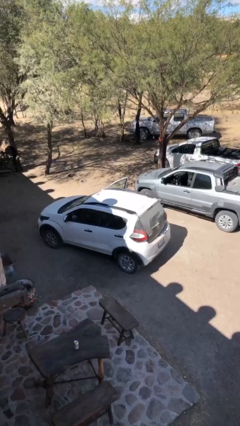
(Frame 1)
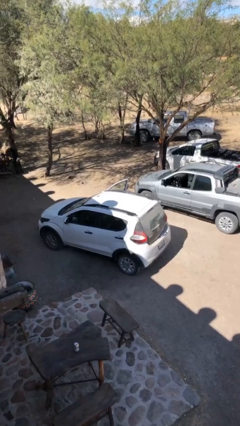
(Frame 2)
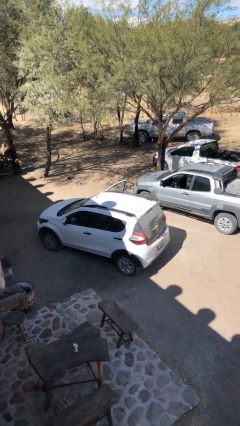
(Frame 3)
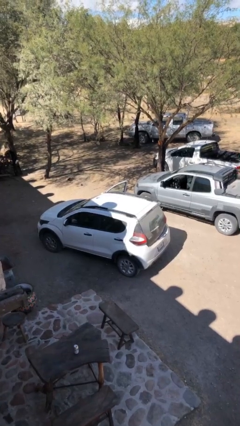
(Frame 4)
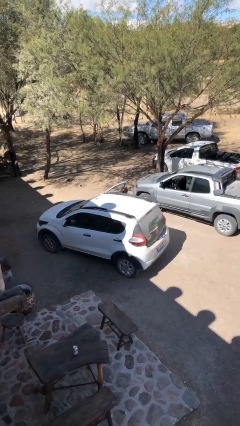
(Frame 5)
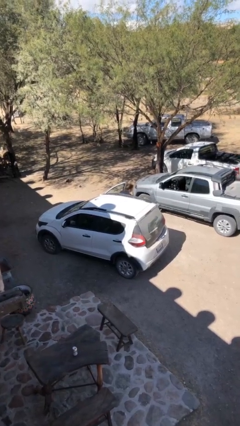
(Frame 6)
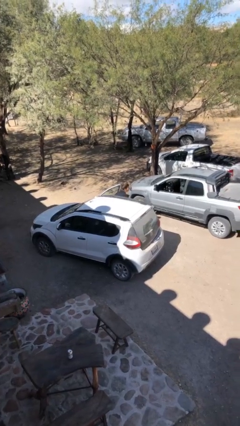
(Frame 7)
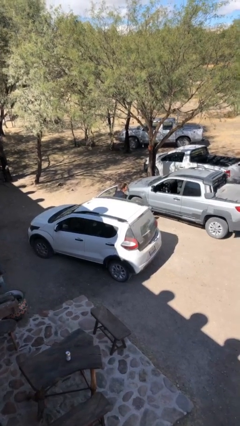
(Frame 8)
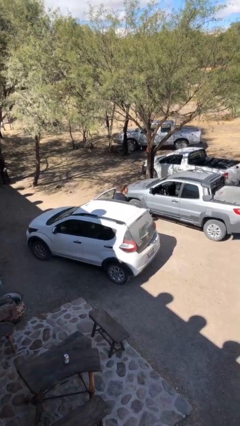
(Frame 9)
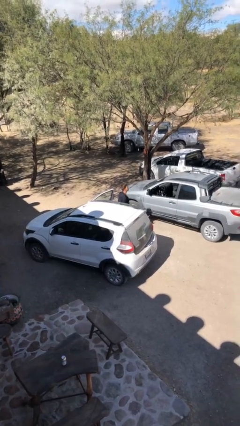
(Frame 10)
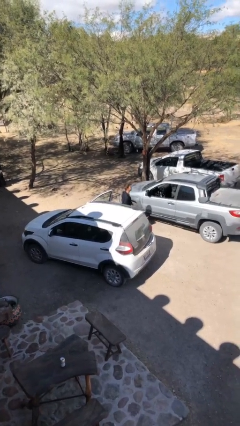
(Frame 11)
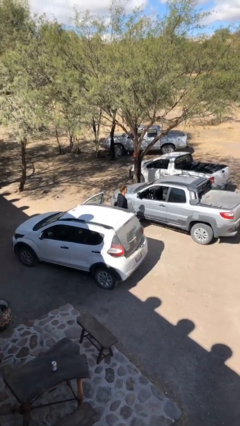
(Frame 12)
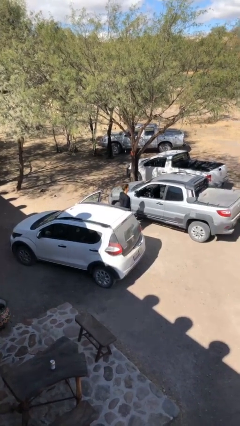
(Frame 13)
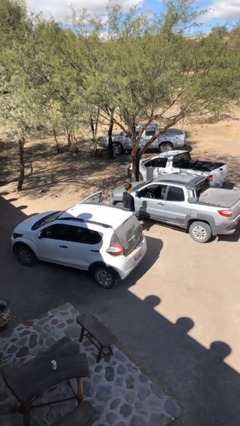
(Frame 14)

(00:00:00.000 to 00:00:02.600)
person exits car

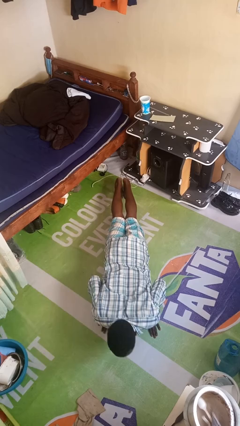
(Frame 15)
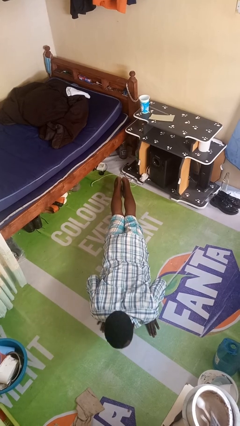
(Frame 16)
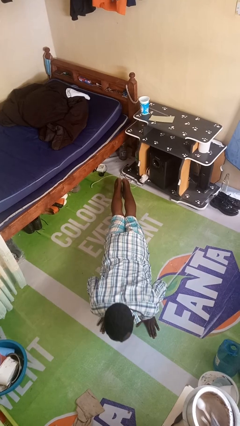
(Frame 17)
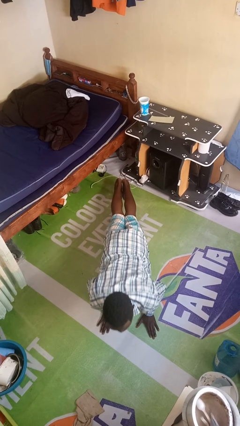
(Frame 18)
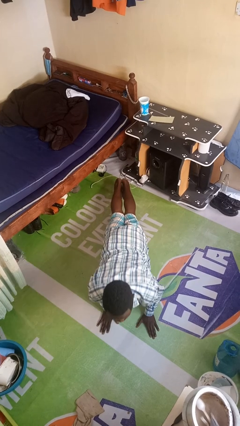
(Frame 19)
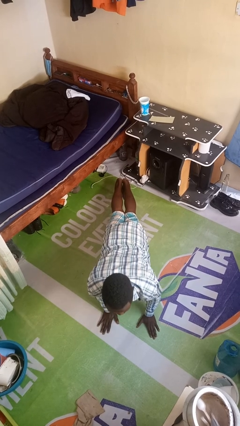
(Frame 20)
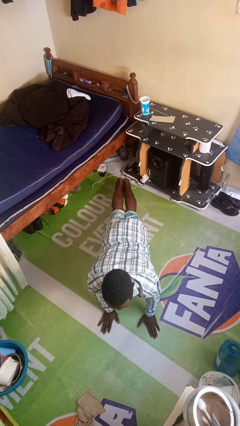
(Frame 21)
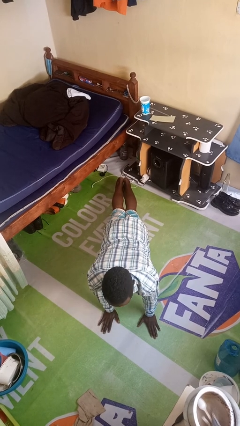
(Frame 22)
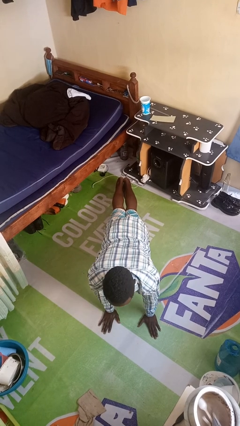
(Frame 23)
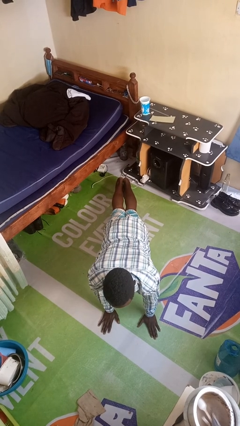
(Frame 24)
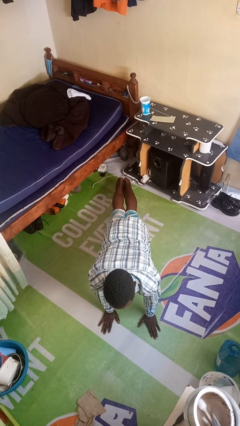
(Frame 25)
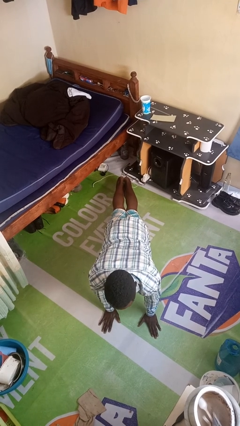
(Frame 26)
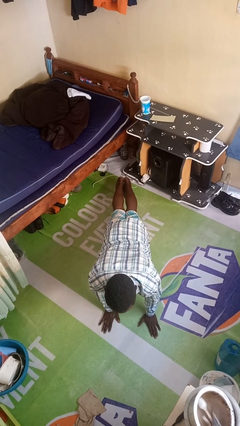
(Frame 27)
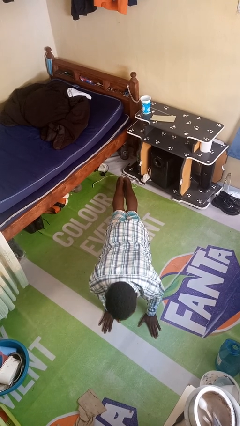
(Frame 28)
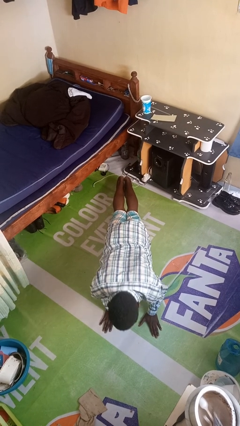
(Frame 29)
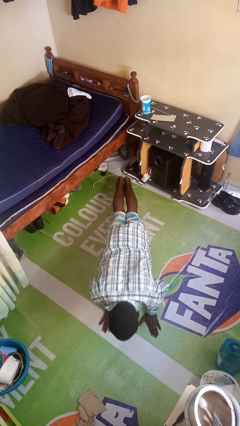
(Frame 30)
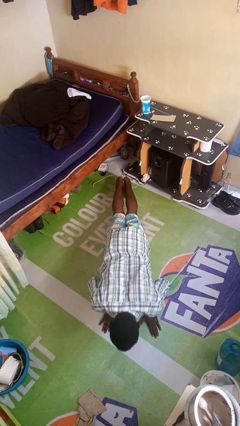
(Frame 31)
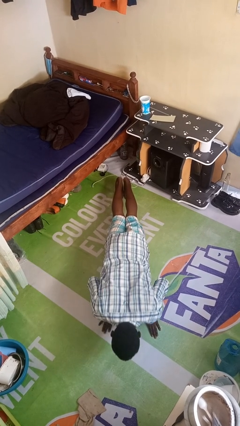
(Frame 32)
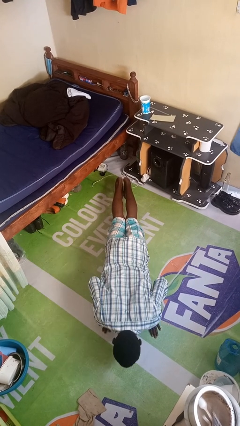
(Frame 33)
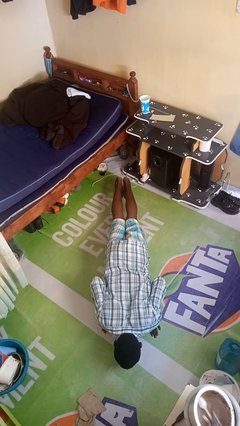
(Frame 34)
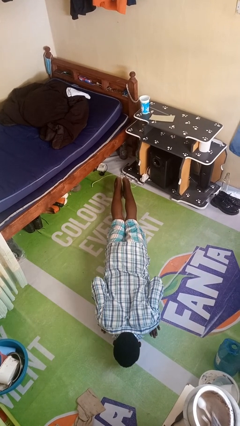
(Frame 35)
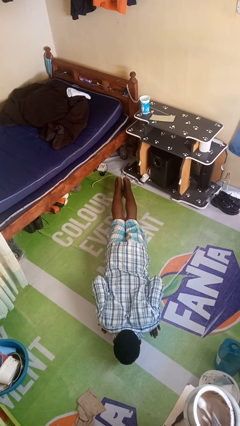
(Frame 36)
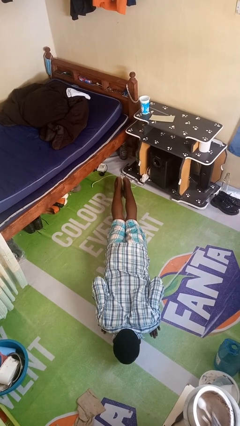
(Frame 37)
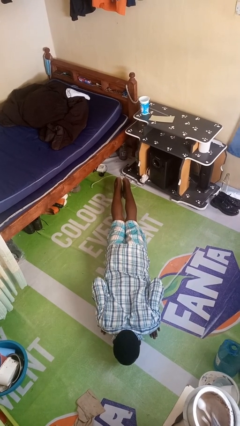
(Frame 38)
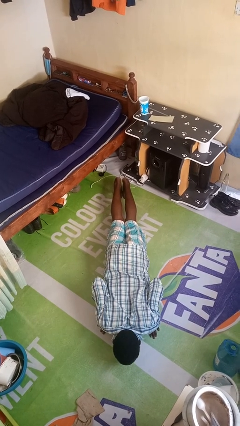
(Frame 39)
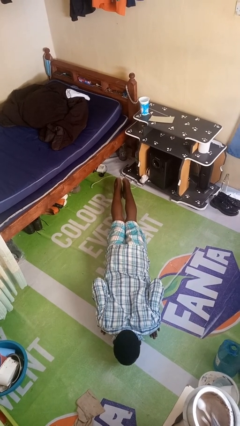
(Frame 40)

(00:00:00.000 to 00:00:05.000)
person exercises with pushup

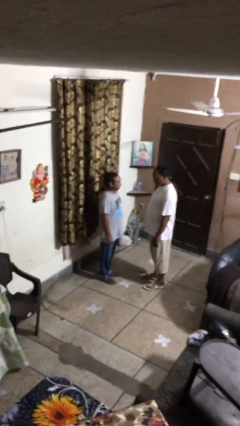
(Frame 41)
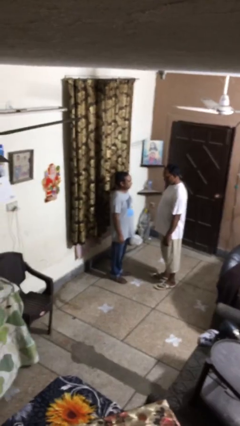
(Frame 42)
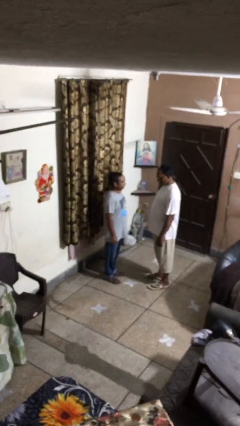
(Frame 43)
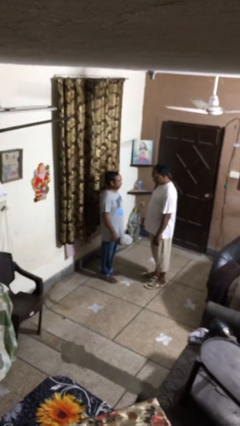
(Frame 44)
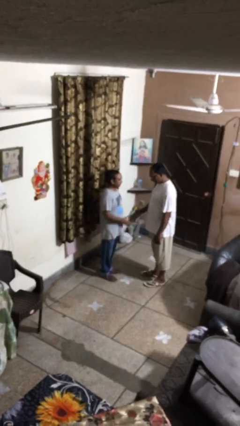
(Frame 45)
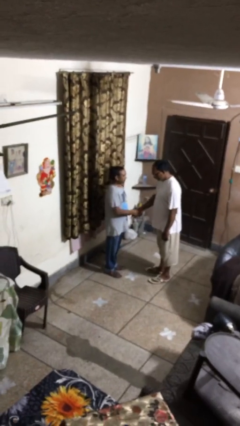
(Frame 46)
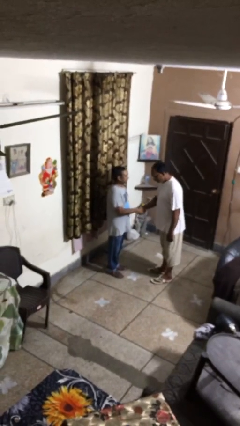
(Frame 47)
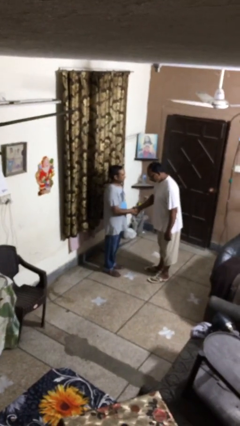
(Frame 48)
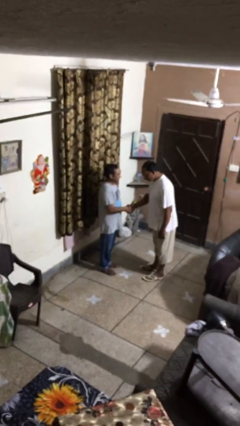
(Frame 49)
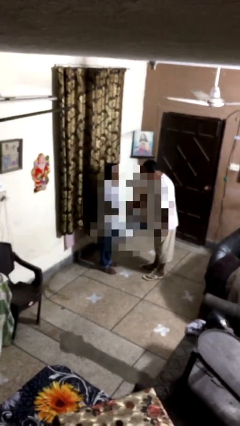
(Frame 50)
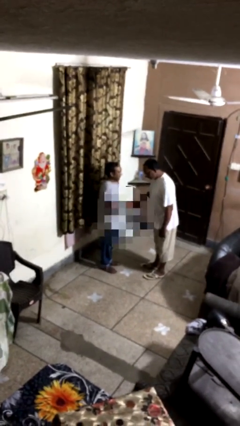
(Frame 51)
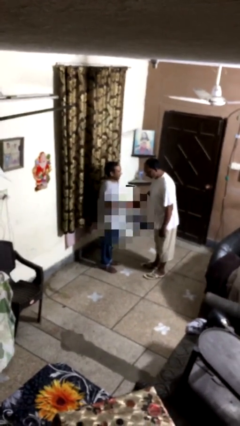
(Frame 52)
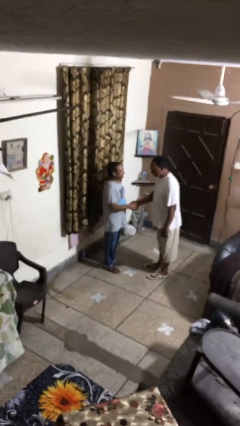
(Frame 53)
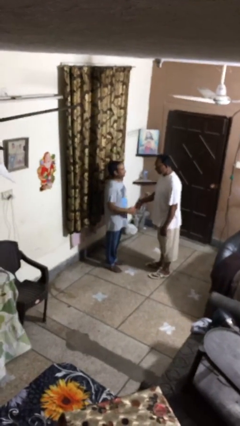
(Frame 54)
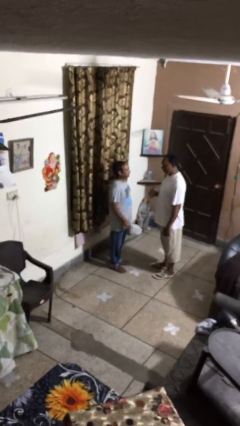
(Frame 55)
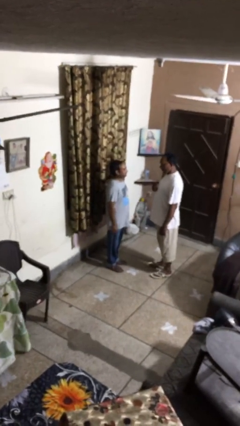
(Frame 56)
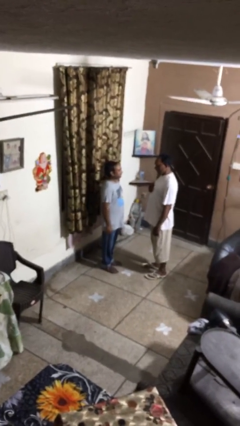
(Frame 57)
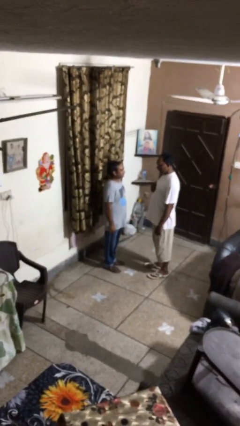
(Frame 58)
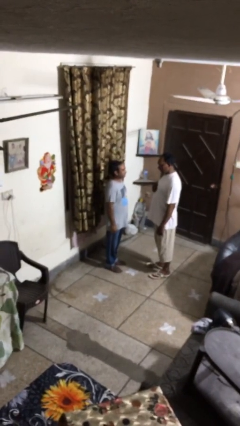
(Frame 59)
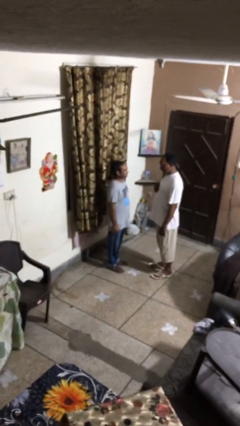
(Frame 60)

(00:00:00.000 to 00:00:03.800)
person shakes hand

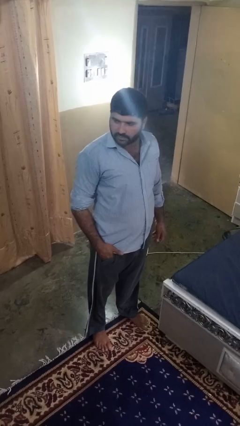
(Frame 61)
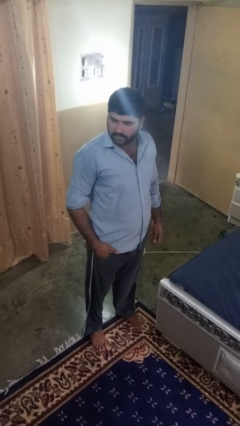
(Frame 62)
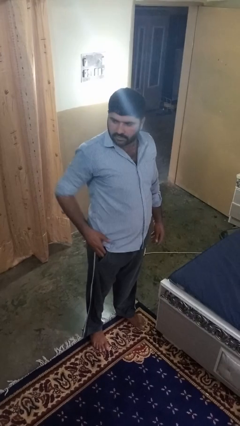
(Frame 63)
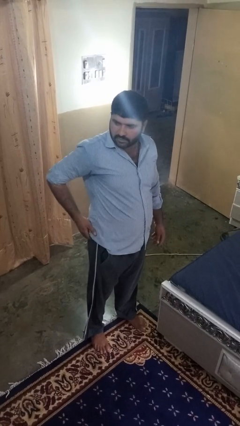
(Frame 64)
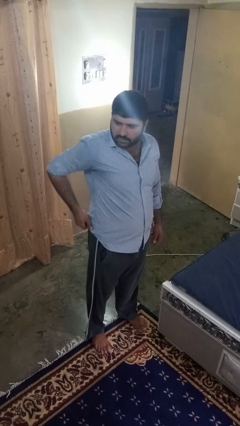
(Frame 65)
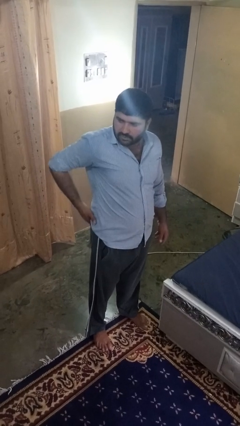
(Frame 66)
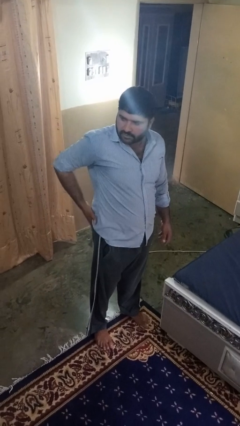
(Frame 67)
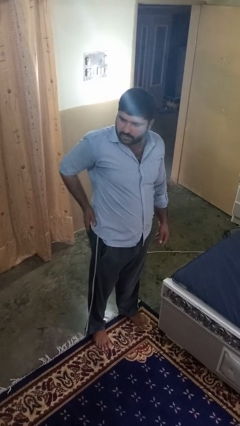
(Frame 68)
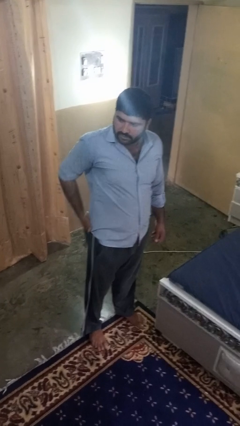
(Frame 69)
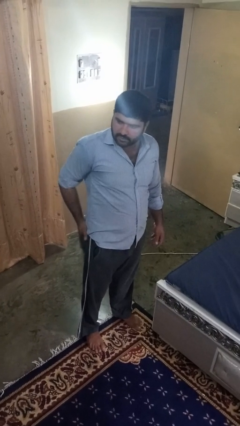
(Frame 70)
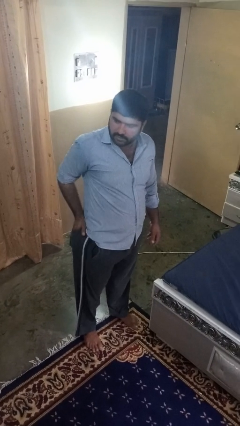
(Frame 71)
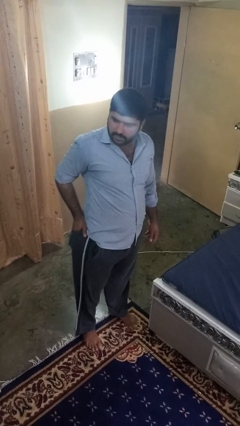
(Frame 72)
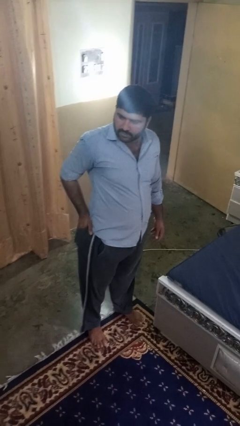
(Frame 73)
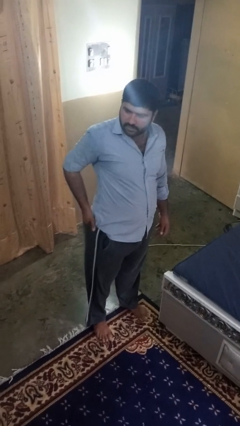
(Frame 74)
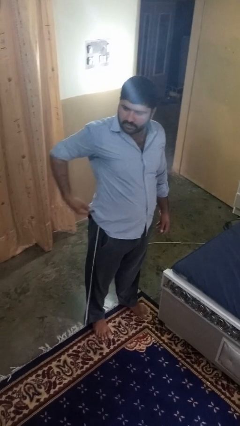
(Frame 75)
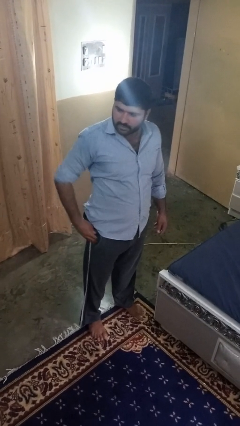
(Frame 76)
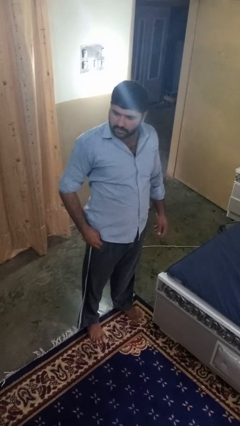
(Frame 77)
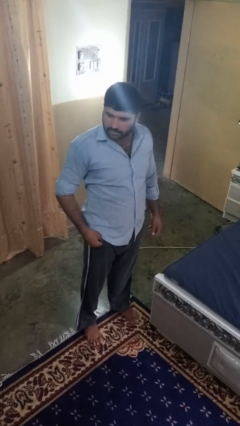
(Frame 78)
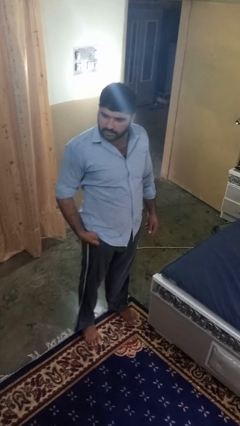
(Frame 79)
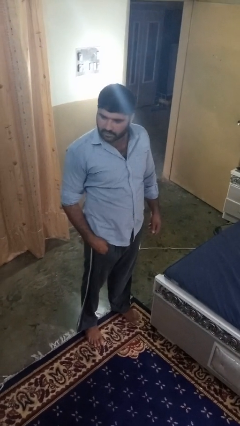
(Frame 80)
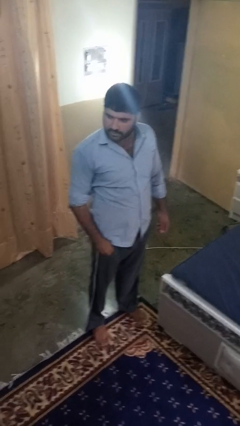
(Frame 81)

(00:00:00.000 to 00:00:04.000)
person puts hands in back pockets

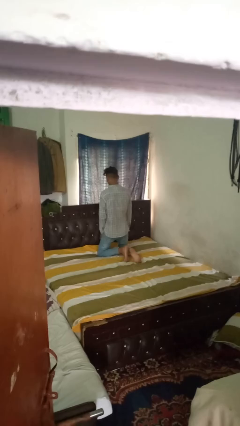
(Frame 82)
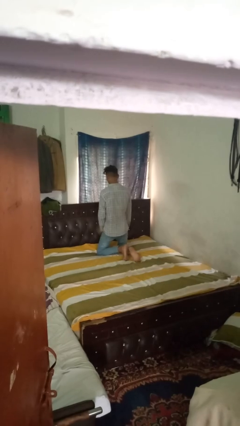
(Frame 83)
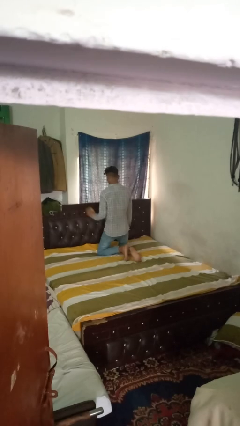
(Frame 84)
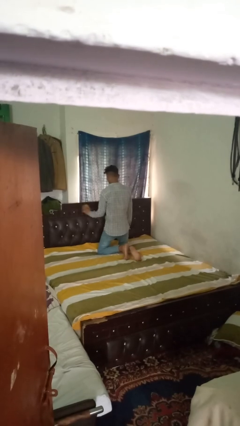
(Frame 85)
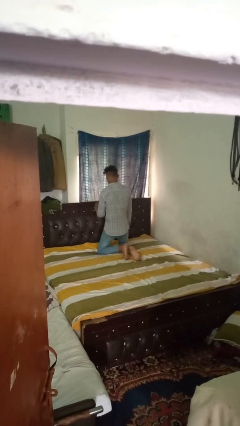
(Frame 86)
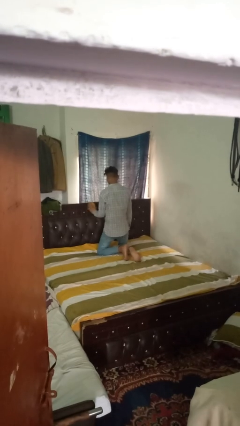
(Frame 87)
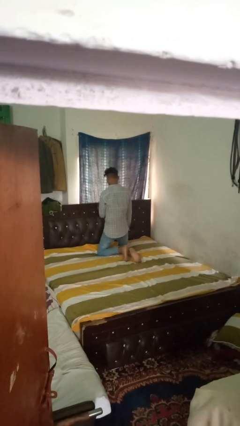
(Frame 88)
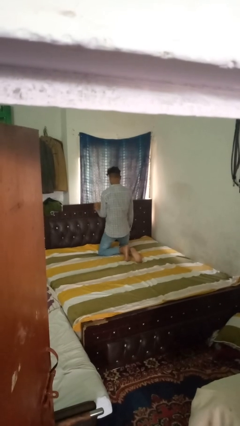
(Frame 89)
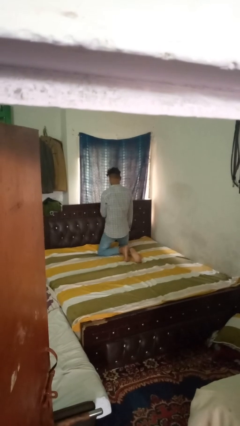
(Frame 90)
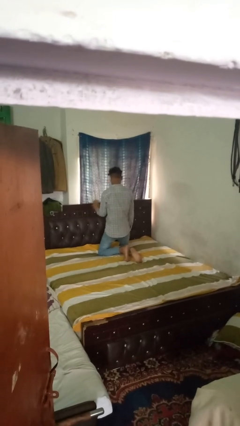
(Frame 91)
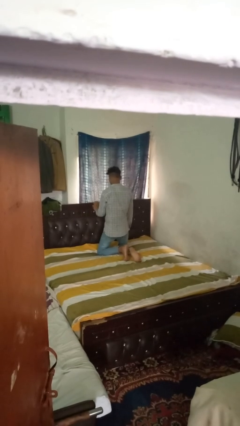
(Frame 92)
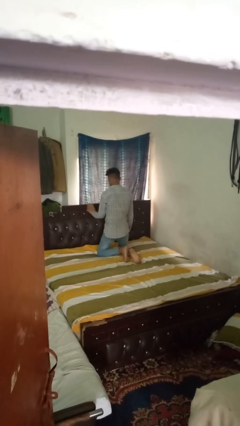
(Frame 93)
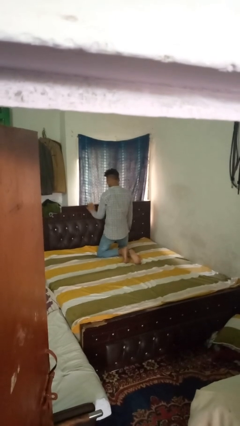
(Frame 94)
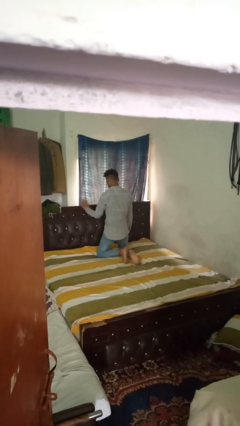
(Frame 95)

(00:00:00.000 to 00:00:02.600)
person dusts furniture
